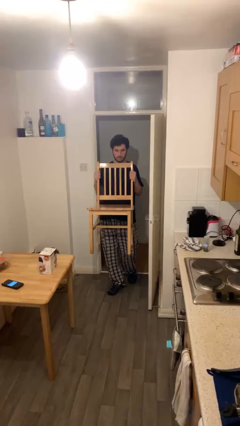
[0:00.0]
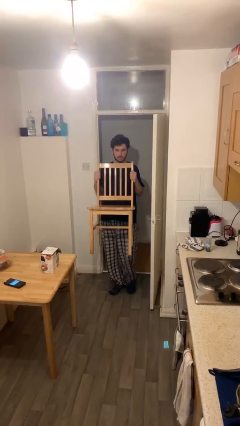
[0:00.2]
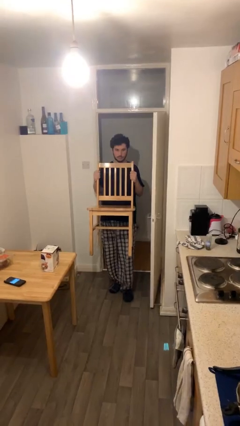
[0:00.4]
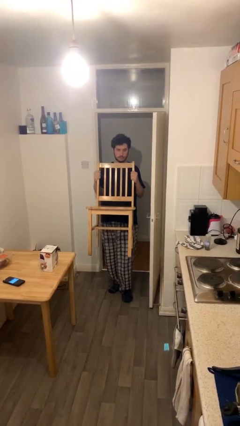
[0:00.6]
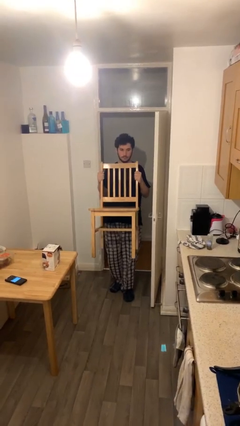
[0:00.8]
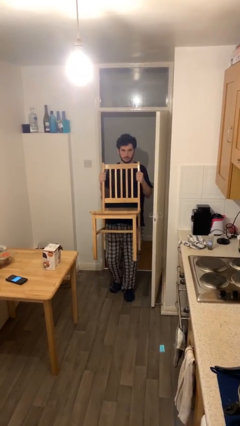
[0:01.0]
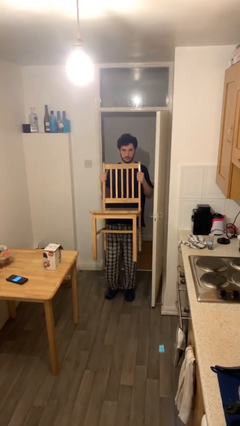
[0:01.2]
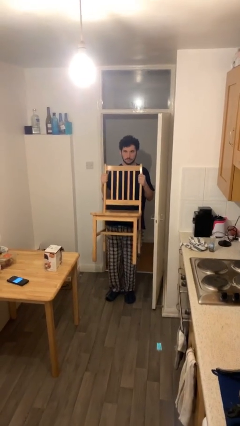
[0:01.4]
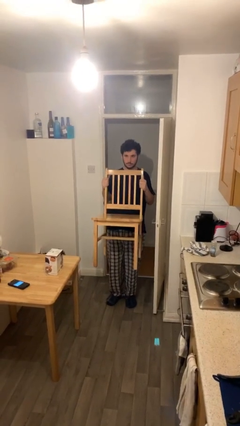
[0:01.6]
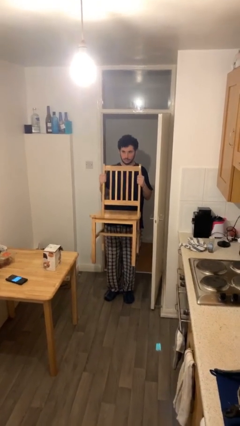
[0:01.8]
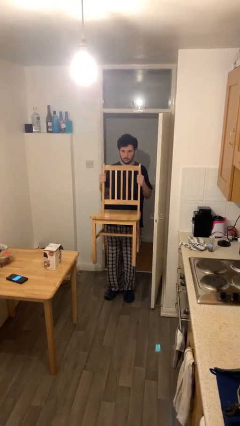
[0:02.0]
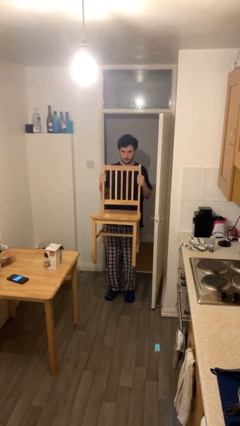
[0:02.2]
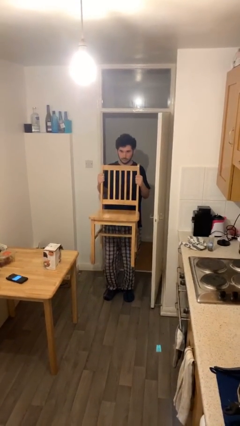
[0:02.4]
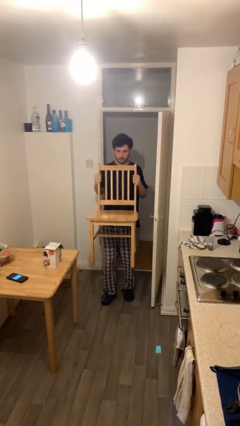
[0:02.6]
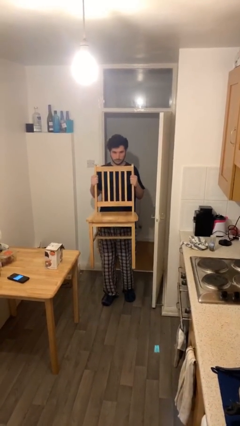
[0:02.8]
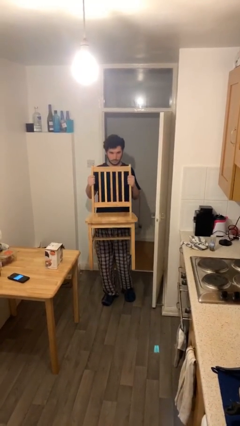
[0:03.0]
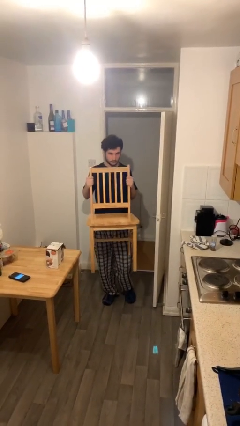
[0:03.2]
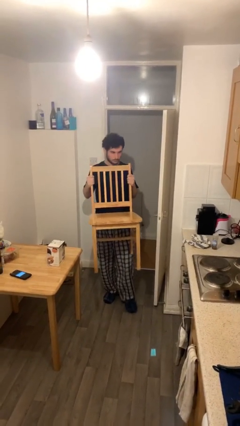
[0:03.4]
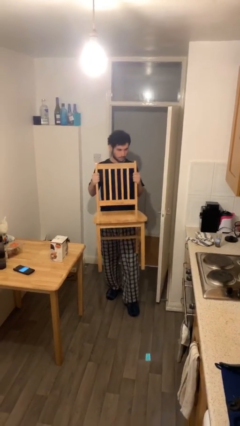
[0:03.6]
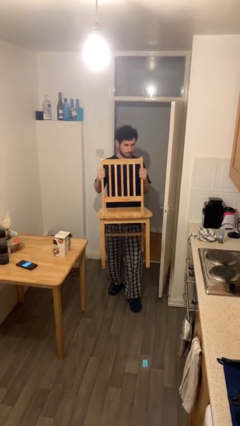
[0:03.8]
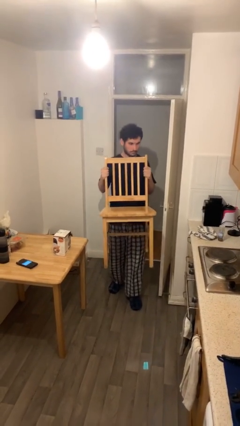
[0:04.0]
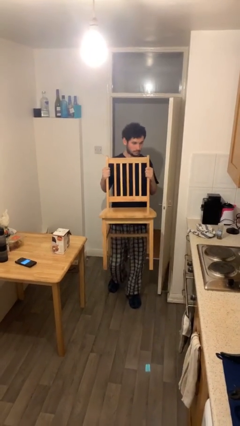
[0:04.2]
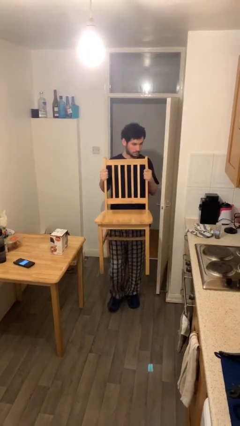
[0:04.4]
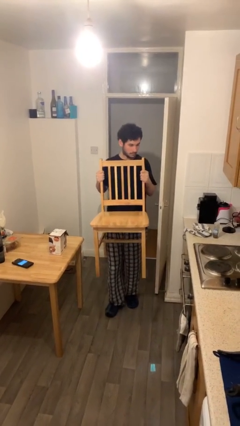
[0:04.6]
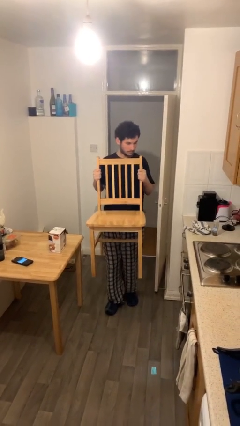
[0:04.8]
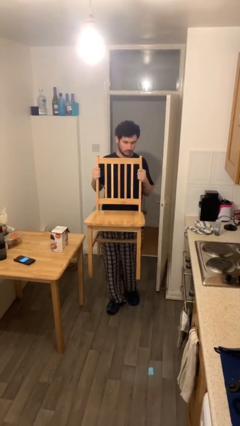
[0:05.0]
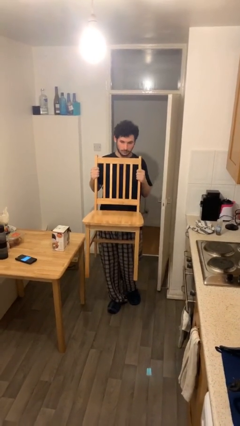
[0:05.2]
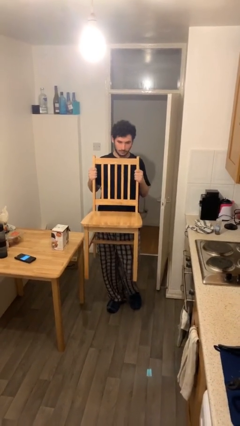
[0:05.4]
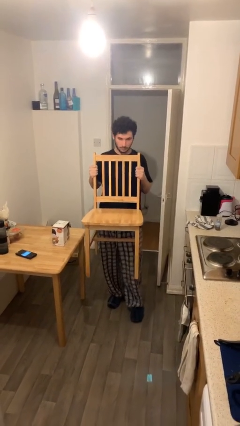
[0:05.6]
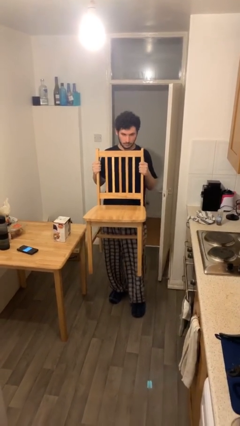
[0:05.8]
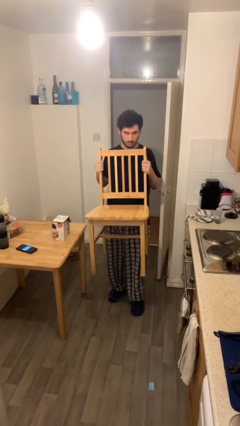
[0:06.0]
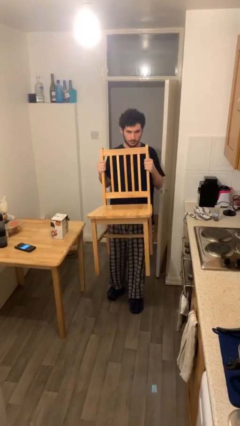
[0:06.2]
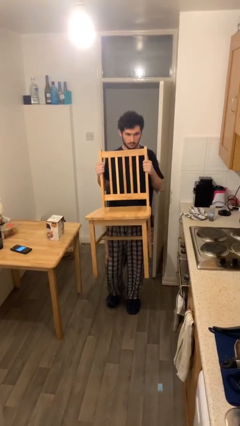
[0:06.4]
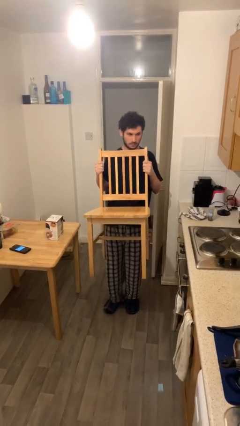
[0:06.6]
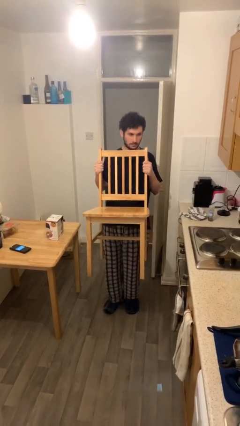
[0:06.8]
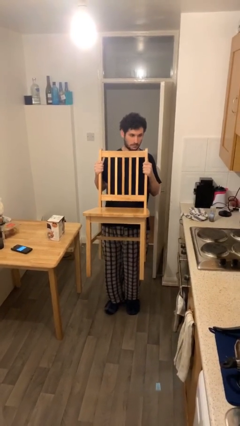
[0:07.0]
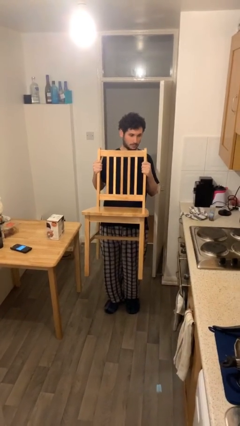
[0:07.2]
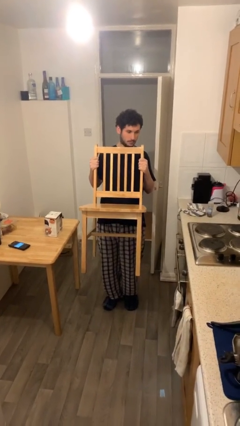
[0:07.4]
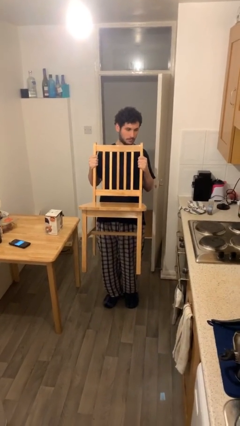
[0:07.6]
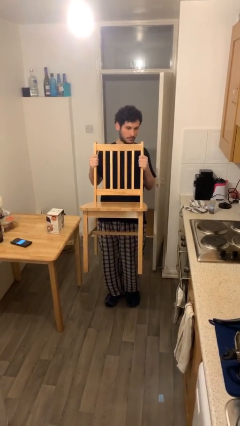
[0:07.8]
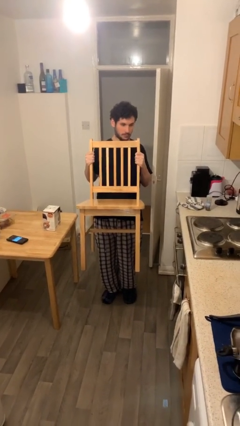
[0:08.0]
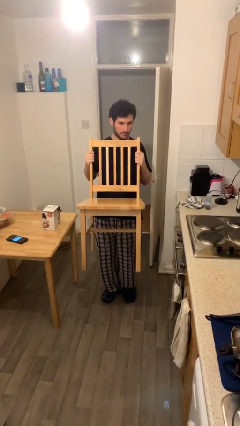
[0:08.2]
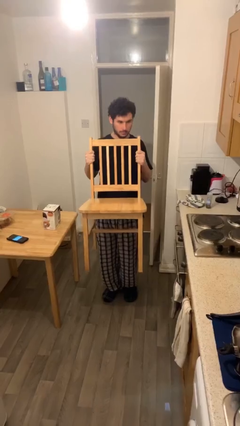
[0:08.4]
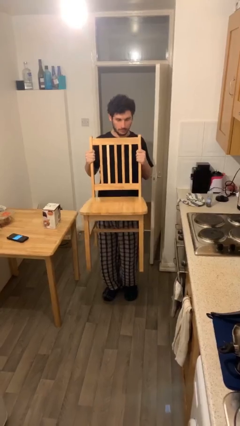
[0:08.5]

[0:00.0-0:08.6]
person carries heavy object

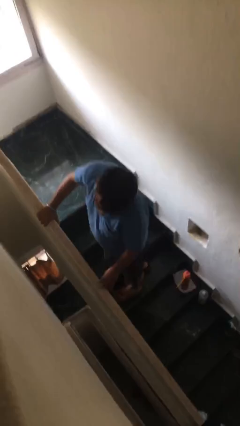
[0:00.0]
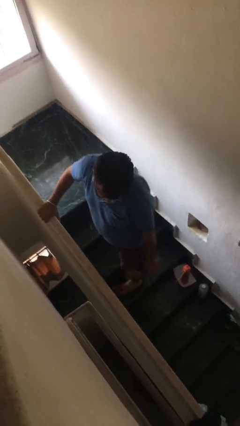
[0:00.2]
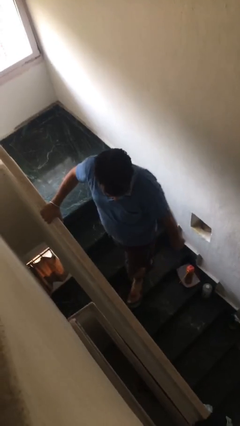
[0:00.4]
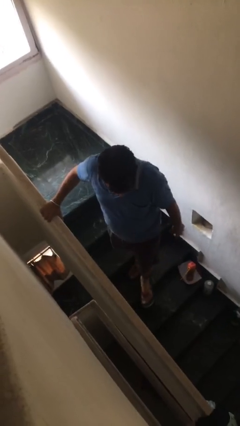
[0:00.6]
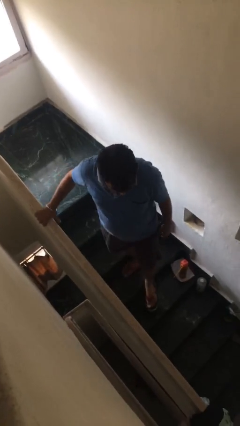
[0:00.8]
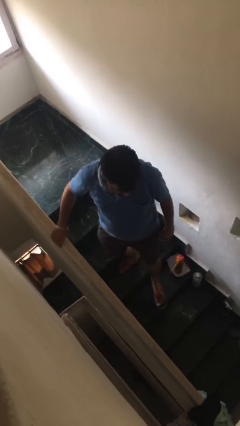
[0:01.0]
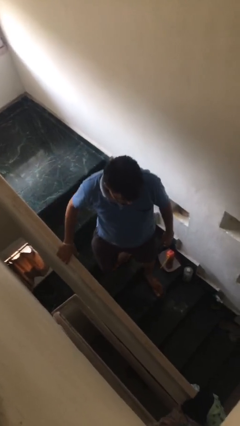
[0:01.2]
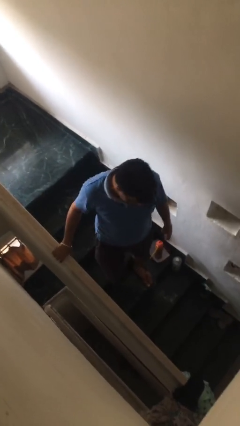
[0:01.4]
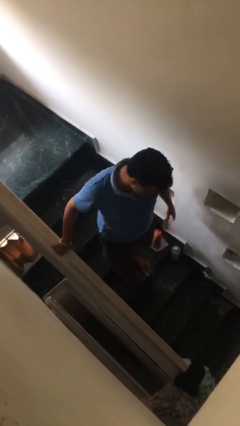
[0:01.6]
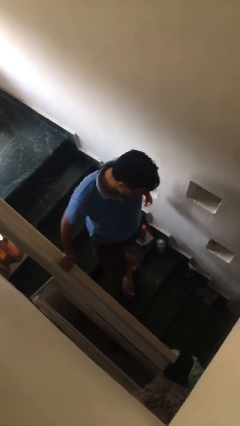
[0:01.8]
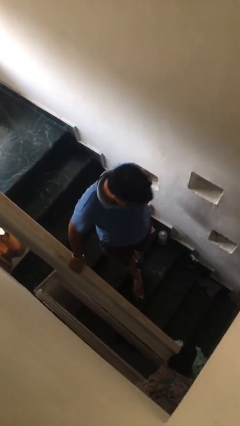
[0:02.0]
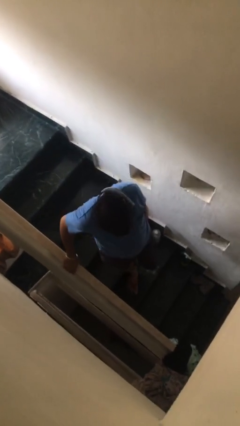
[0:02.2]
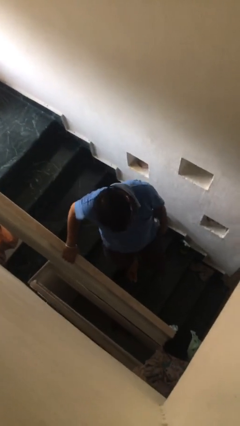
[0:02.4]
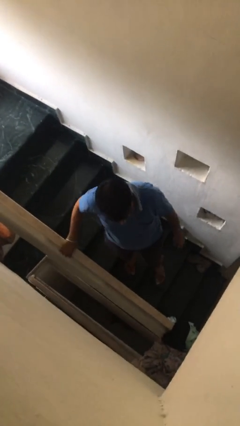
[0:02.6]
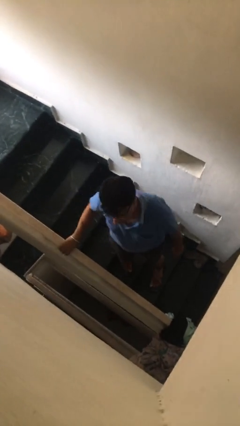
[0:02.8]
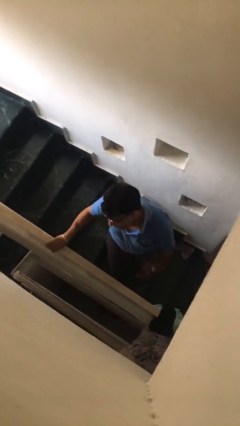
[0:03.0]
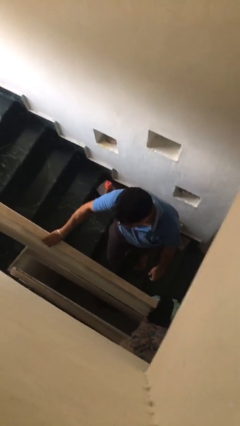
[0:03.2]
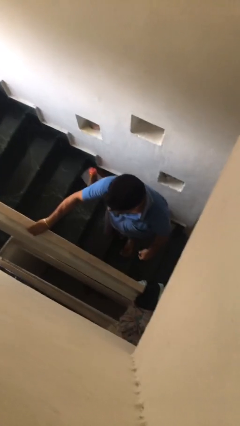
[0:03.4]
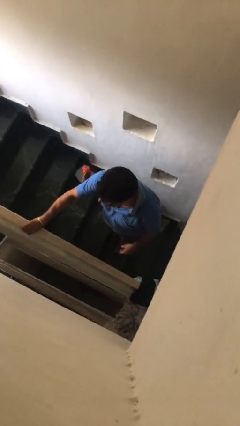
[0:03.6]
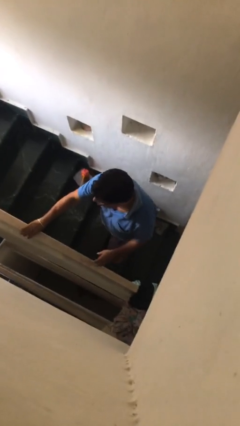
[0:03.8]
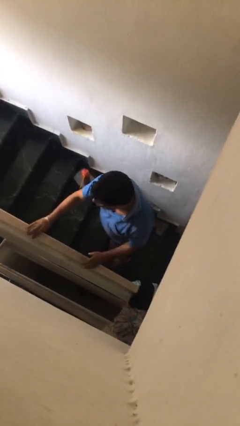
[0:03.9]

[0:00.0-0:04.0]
person climbs down stairs

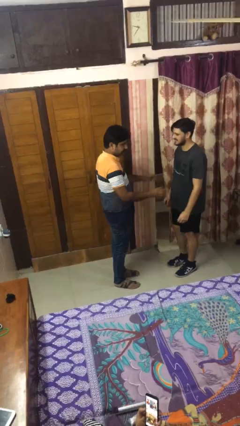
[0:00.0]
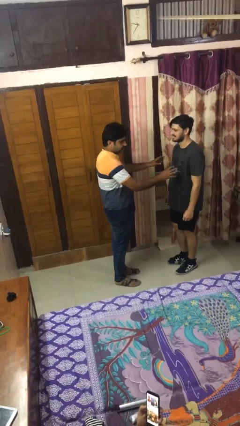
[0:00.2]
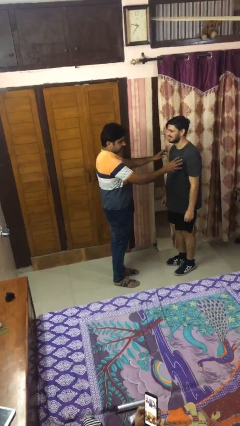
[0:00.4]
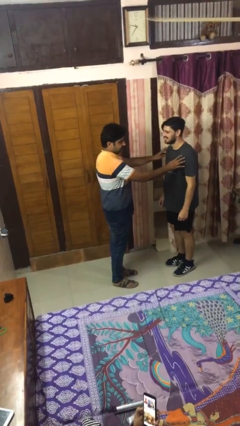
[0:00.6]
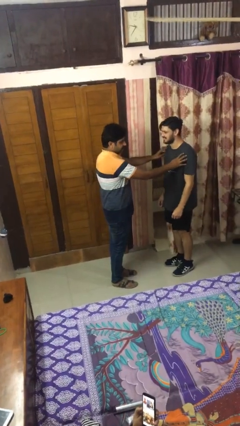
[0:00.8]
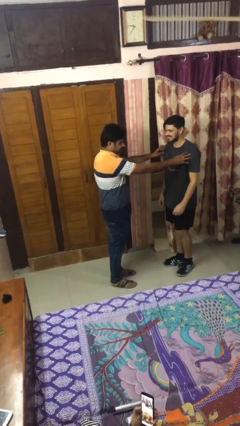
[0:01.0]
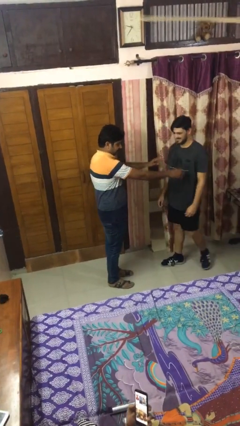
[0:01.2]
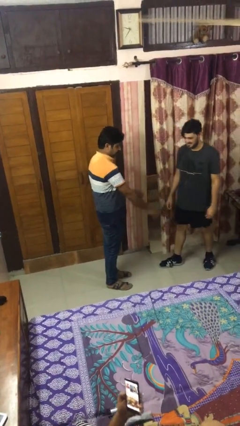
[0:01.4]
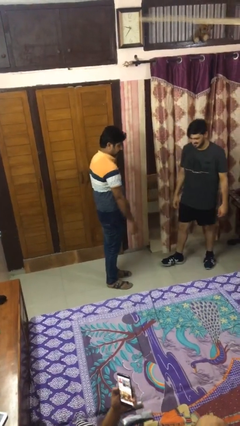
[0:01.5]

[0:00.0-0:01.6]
person shoves person

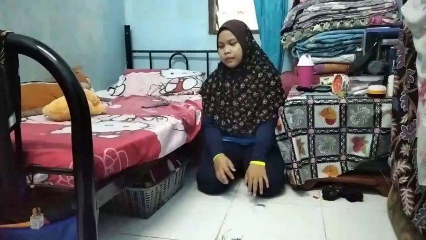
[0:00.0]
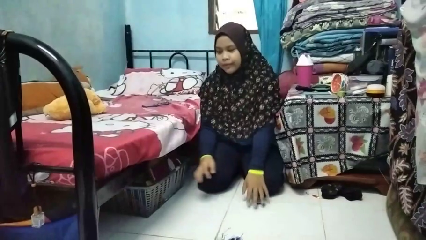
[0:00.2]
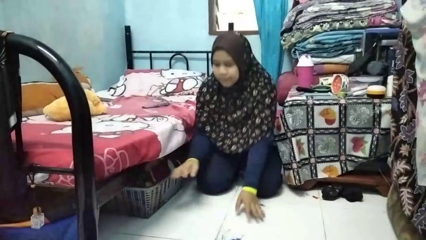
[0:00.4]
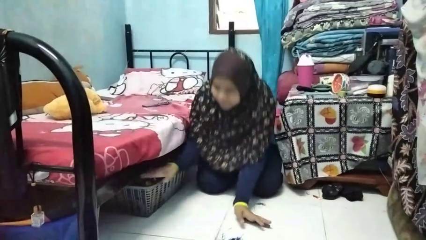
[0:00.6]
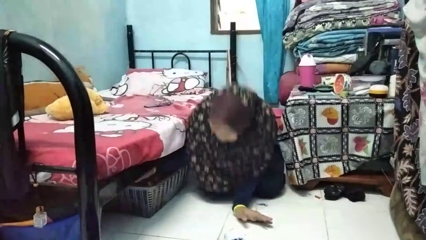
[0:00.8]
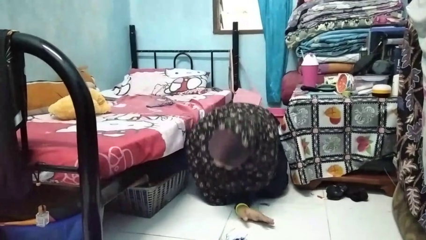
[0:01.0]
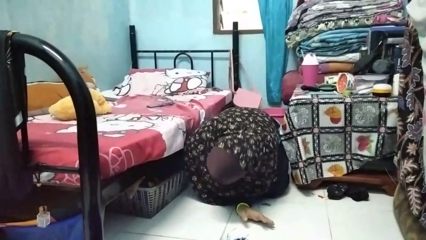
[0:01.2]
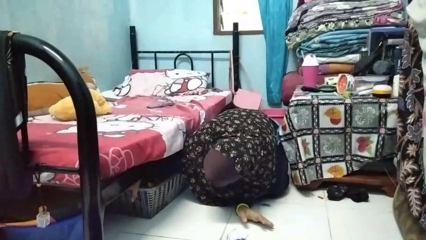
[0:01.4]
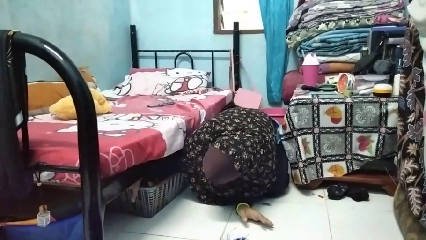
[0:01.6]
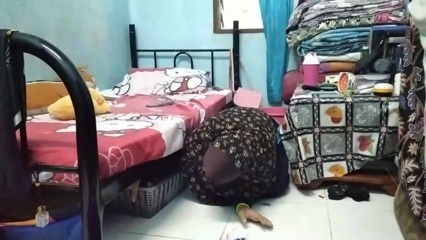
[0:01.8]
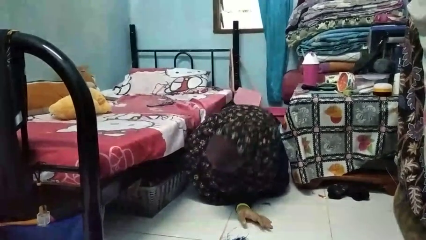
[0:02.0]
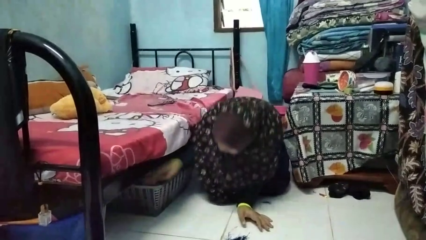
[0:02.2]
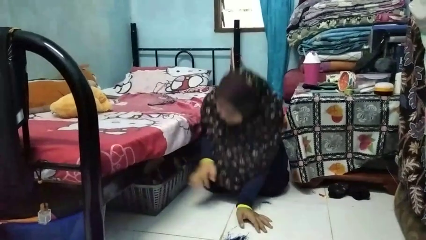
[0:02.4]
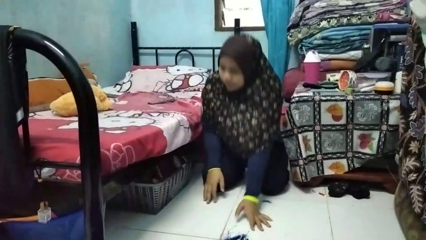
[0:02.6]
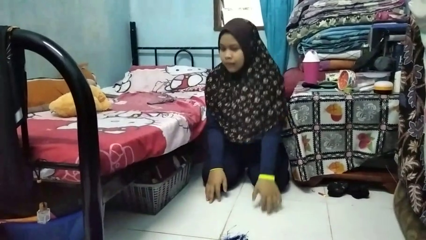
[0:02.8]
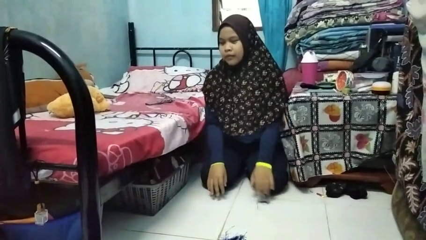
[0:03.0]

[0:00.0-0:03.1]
person searches under bed

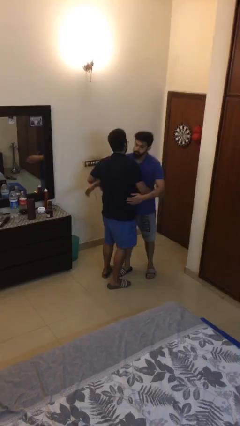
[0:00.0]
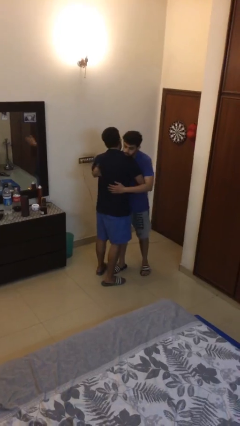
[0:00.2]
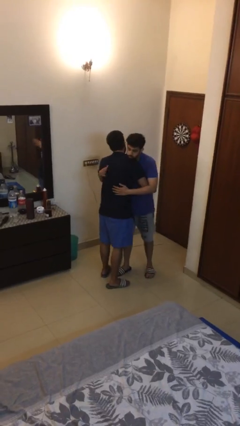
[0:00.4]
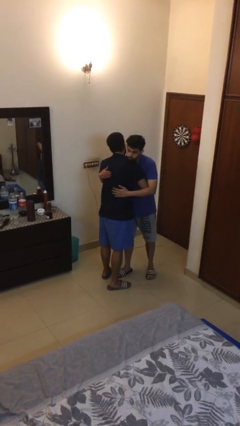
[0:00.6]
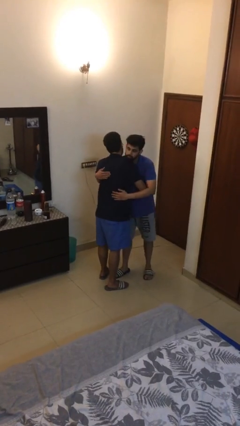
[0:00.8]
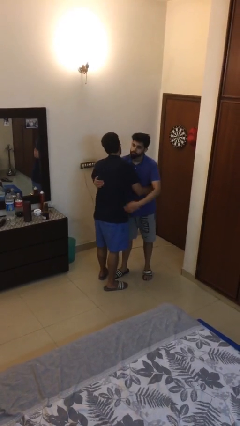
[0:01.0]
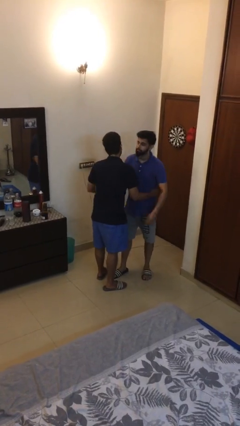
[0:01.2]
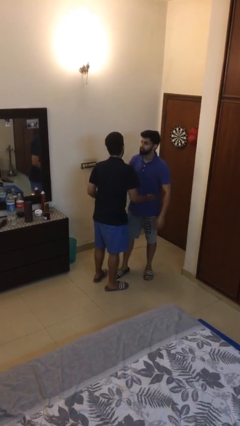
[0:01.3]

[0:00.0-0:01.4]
person embraces person
